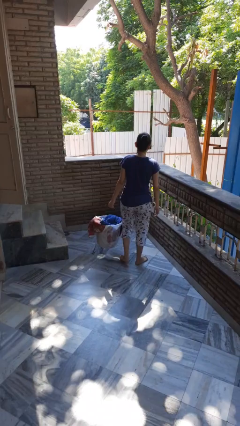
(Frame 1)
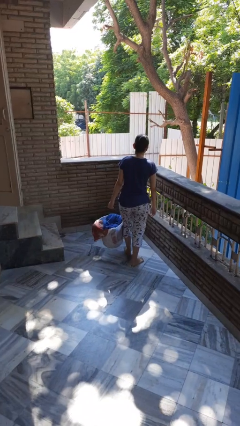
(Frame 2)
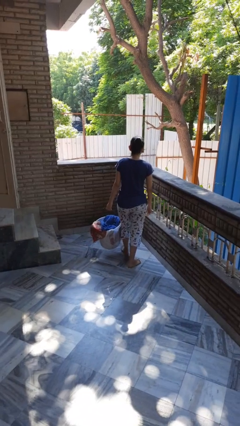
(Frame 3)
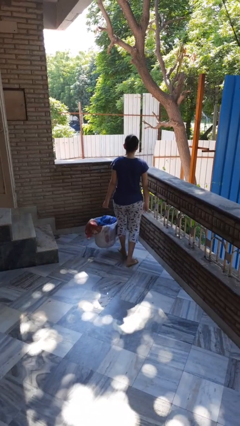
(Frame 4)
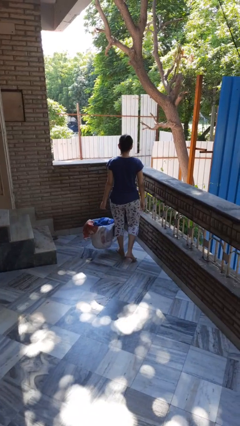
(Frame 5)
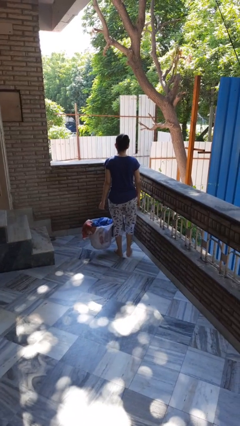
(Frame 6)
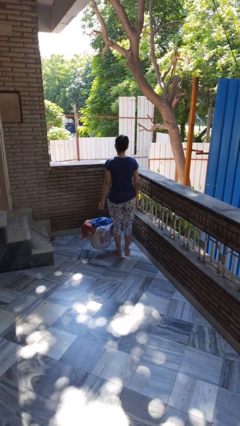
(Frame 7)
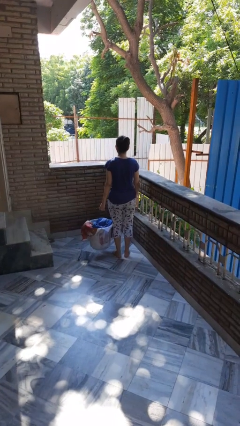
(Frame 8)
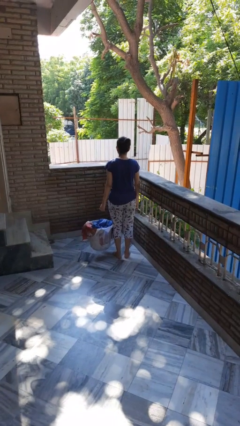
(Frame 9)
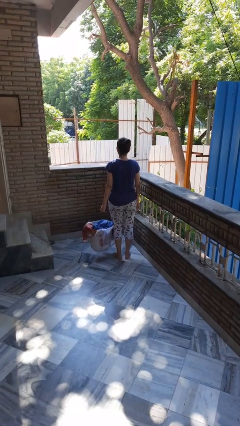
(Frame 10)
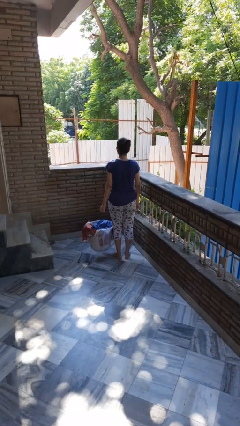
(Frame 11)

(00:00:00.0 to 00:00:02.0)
person carries laundry basket

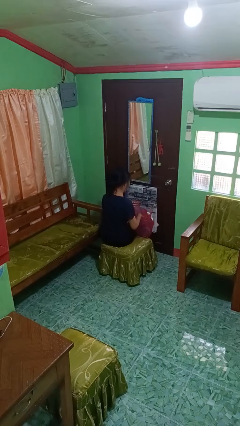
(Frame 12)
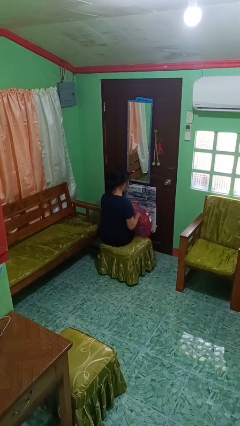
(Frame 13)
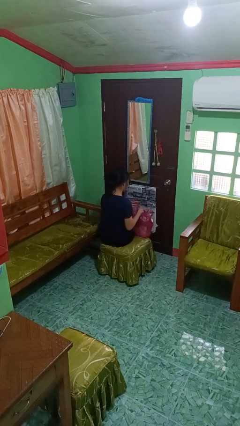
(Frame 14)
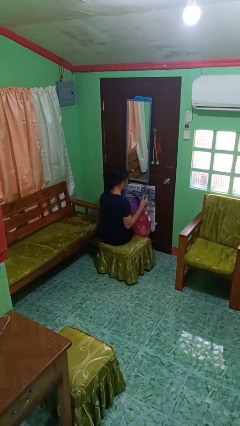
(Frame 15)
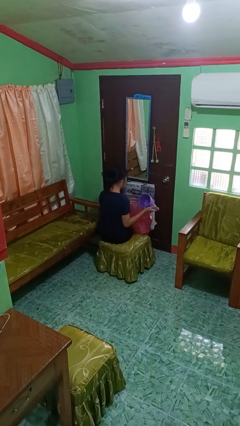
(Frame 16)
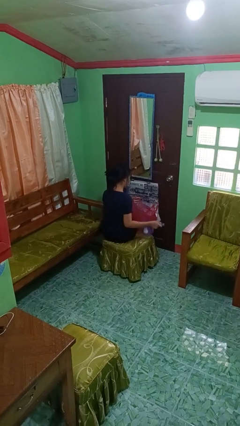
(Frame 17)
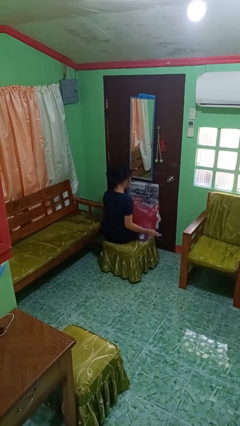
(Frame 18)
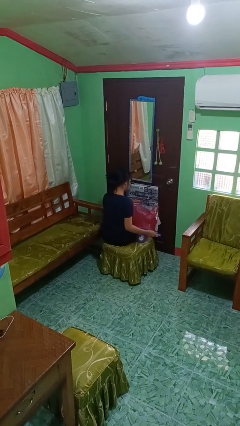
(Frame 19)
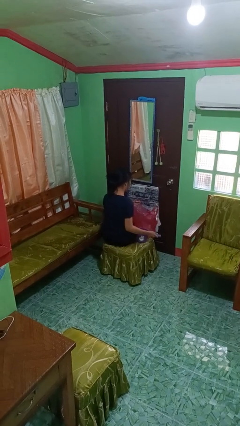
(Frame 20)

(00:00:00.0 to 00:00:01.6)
person takes object from bag

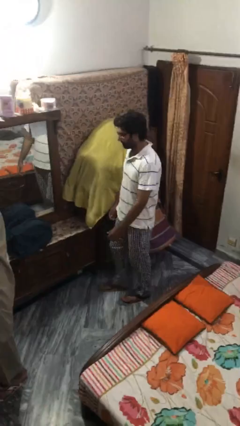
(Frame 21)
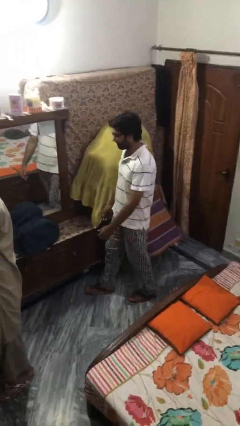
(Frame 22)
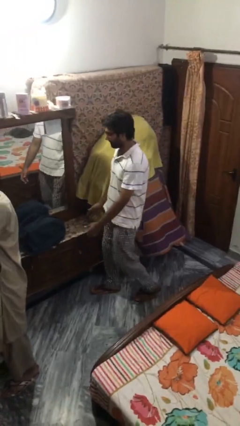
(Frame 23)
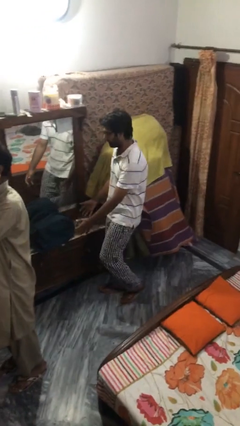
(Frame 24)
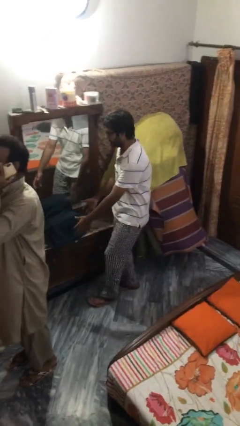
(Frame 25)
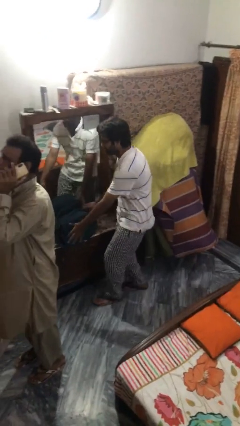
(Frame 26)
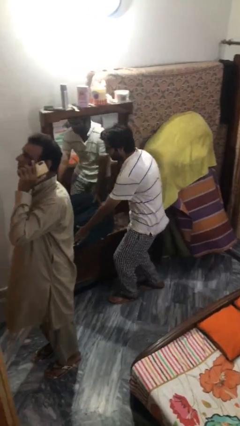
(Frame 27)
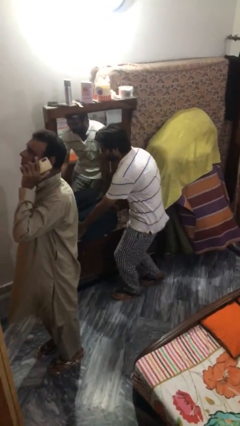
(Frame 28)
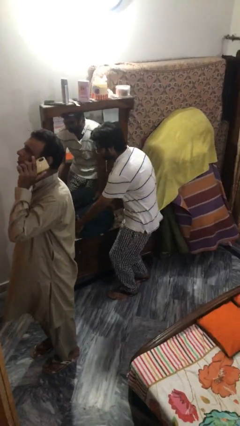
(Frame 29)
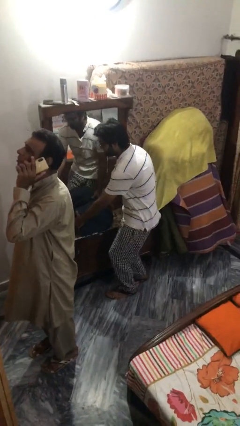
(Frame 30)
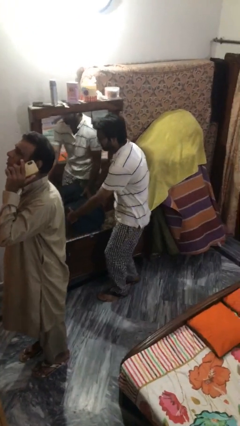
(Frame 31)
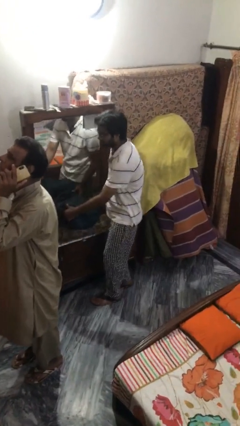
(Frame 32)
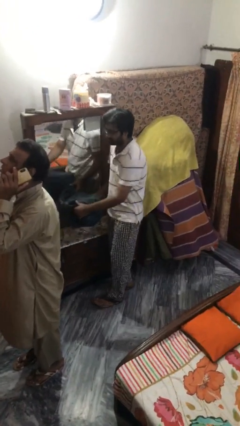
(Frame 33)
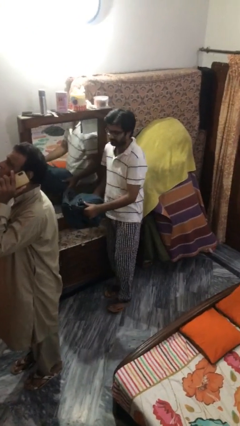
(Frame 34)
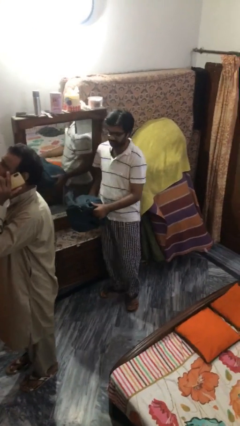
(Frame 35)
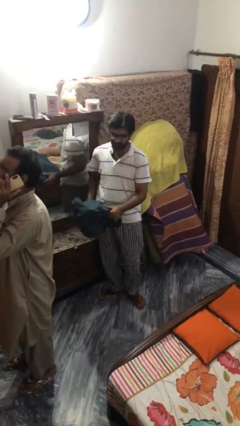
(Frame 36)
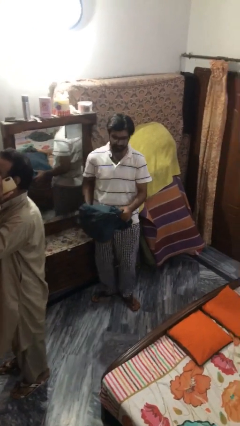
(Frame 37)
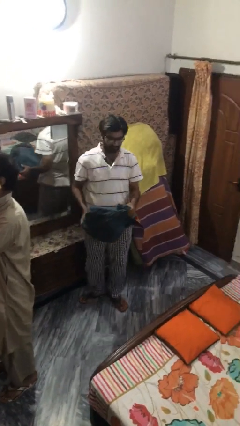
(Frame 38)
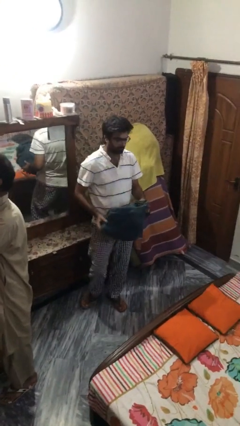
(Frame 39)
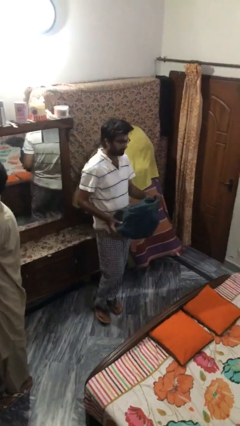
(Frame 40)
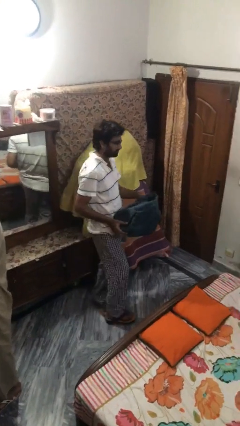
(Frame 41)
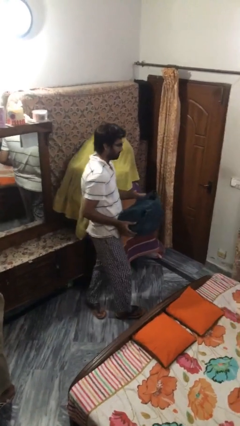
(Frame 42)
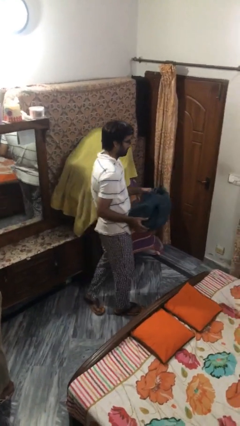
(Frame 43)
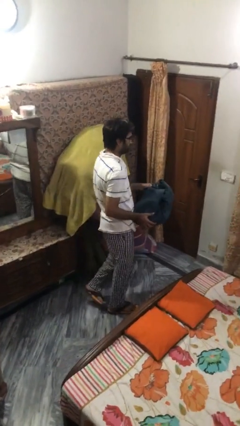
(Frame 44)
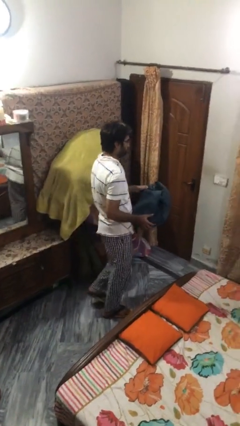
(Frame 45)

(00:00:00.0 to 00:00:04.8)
person steals object from person

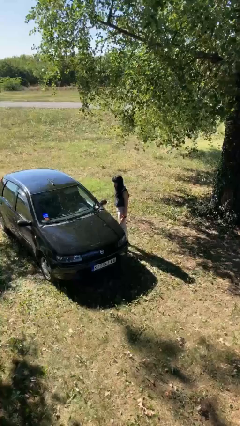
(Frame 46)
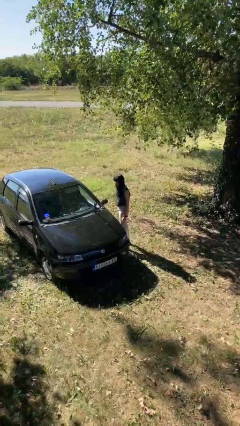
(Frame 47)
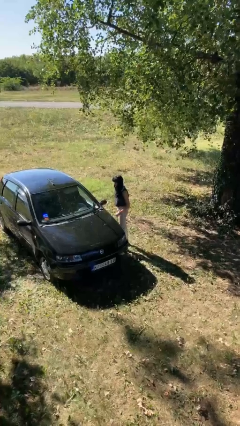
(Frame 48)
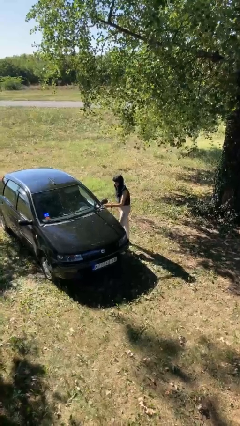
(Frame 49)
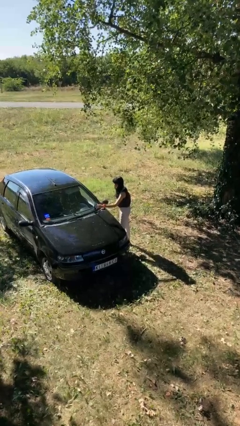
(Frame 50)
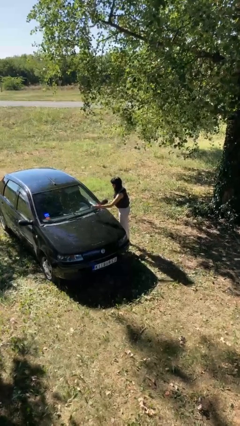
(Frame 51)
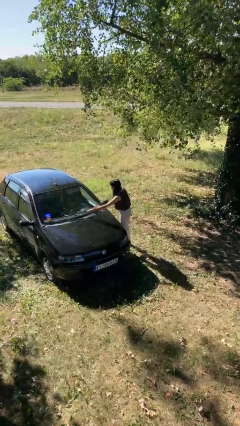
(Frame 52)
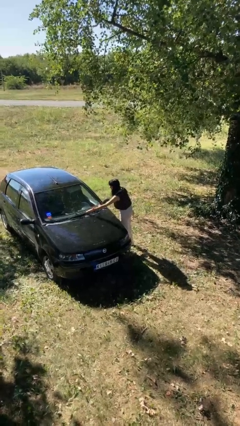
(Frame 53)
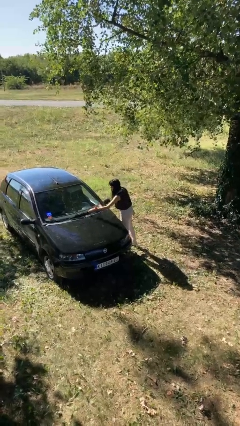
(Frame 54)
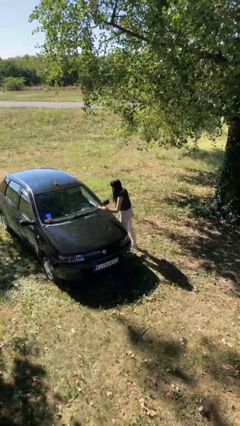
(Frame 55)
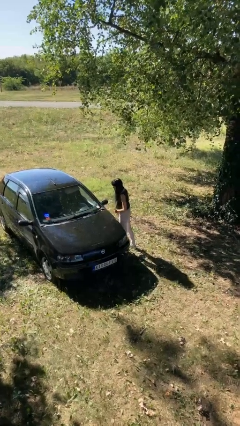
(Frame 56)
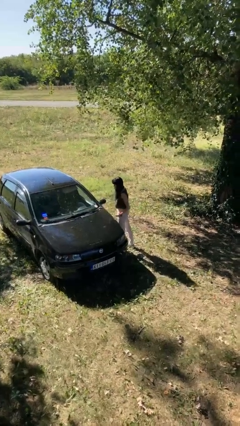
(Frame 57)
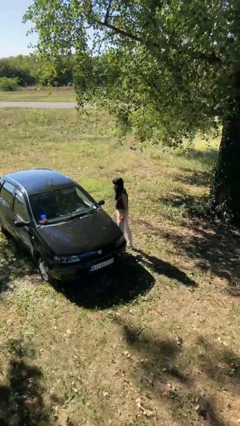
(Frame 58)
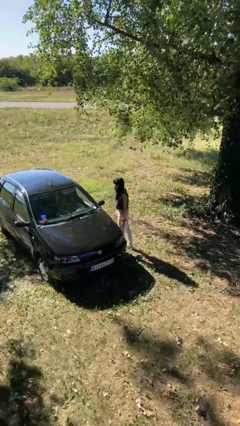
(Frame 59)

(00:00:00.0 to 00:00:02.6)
person flips down car wipers

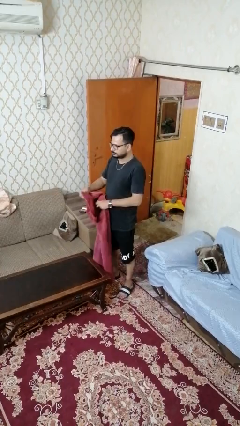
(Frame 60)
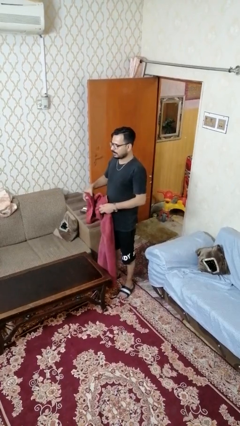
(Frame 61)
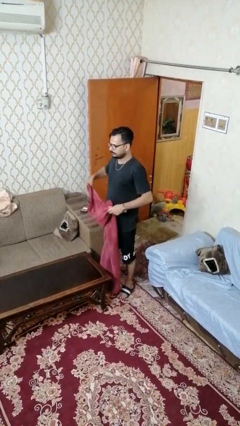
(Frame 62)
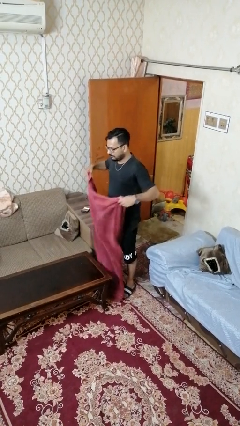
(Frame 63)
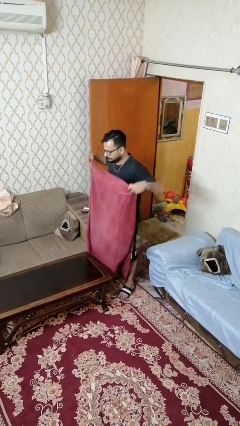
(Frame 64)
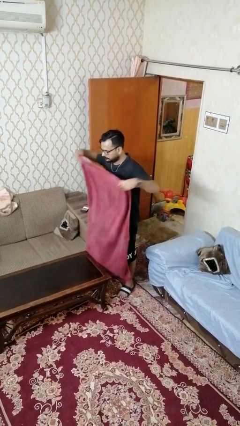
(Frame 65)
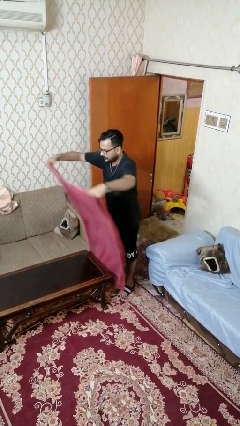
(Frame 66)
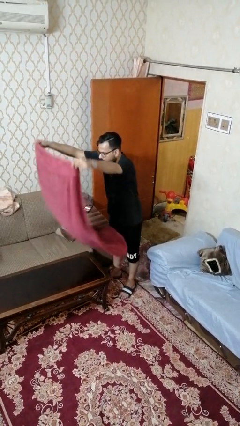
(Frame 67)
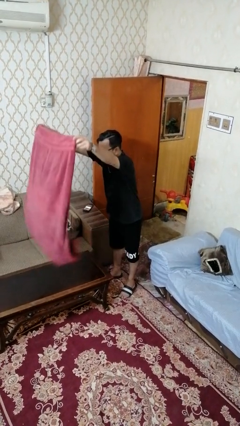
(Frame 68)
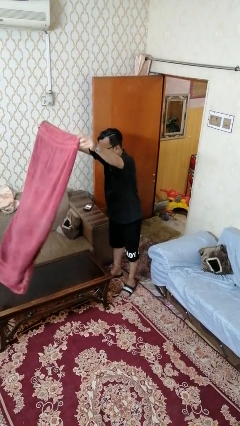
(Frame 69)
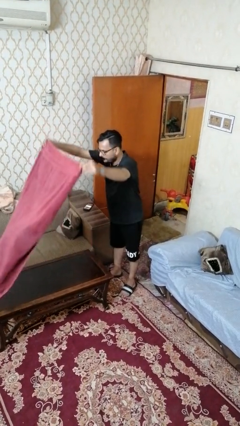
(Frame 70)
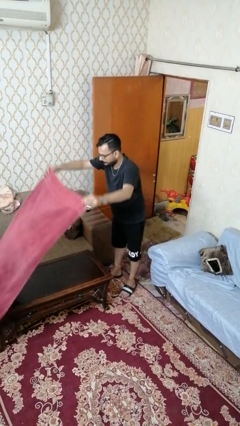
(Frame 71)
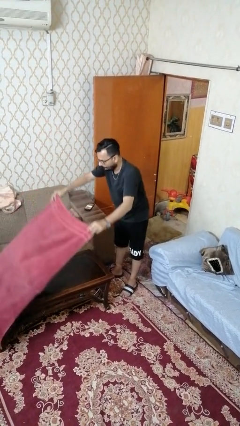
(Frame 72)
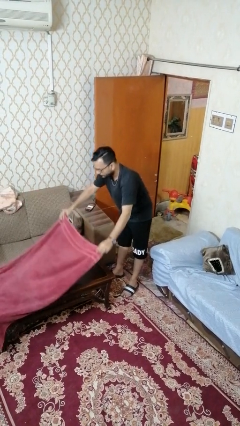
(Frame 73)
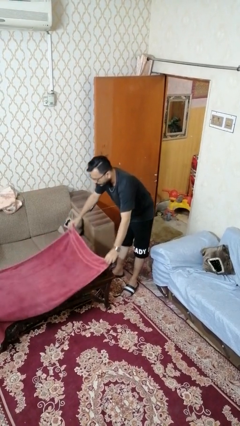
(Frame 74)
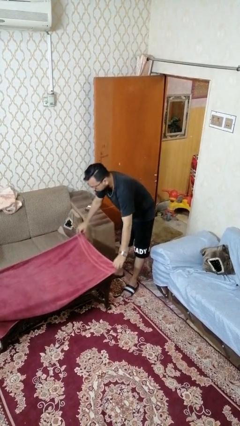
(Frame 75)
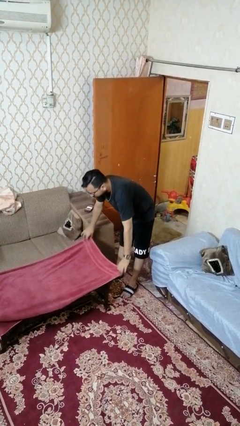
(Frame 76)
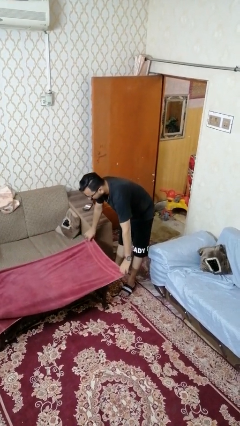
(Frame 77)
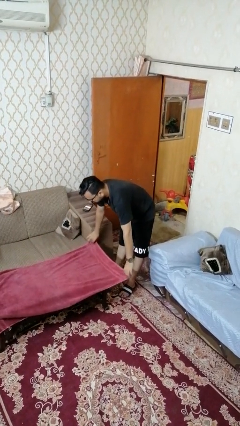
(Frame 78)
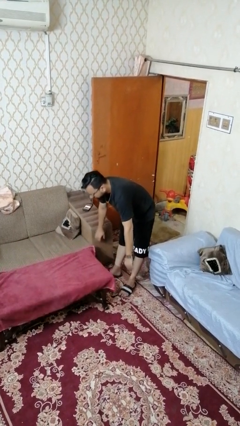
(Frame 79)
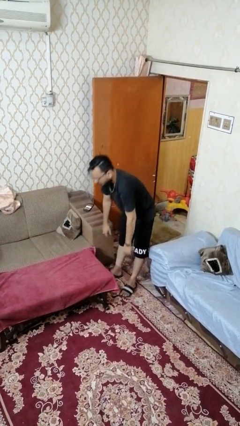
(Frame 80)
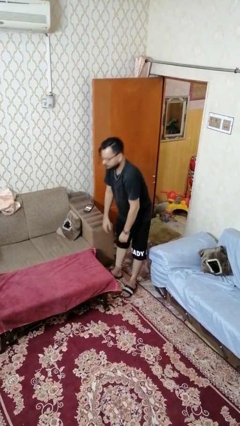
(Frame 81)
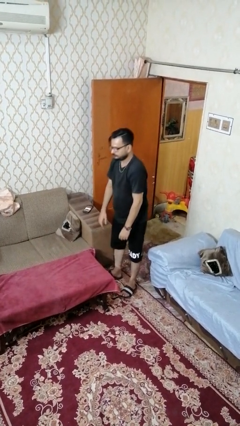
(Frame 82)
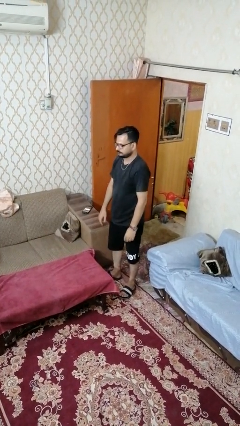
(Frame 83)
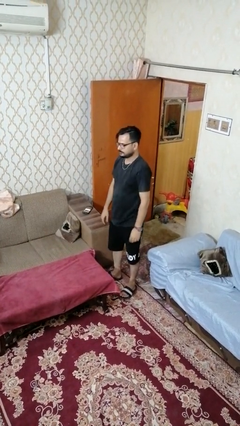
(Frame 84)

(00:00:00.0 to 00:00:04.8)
person spreads tablecloth

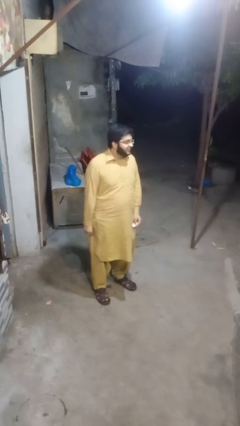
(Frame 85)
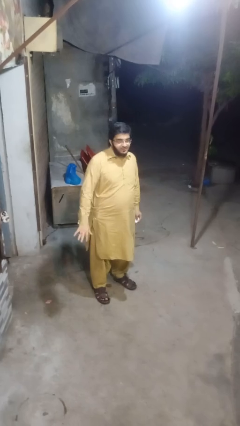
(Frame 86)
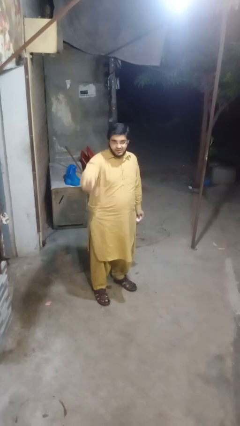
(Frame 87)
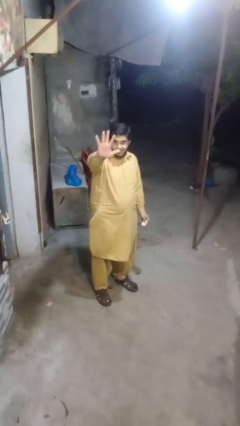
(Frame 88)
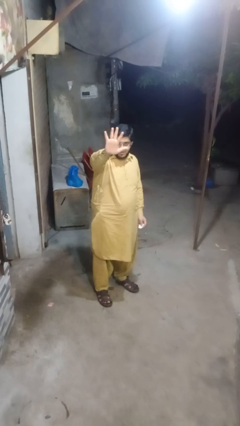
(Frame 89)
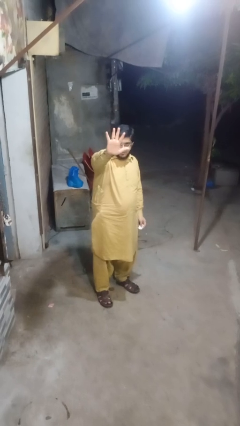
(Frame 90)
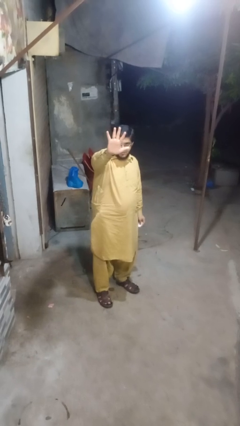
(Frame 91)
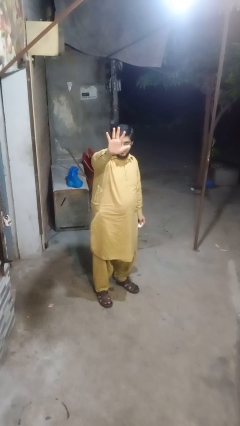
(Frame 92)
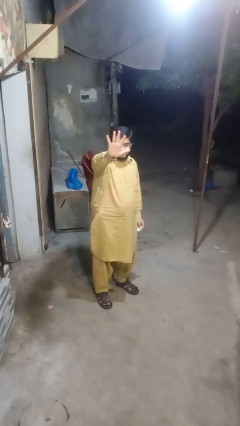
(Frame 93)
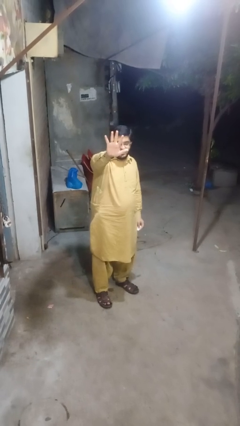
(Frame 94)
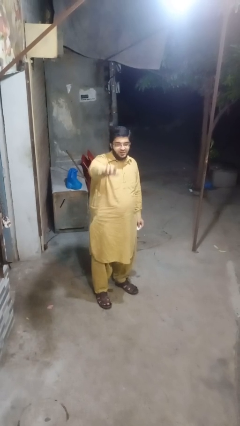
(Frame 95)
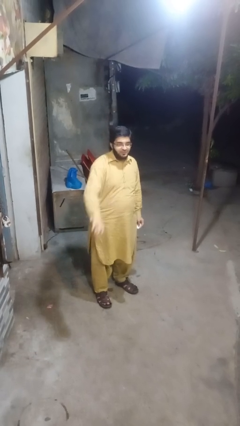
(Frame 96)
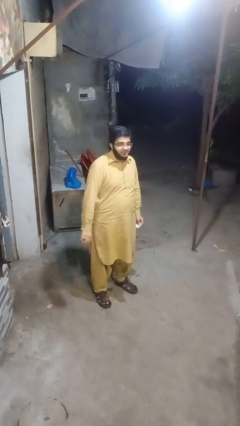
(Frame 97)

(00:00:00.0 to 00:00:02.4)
person gestures number five
